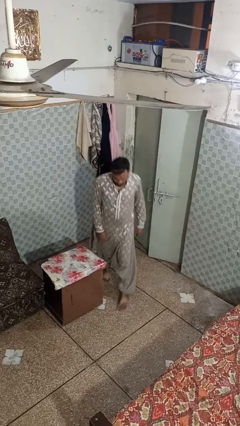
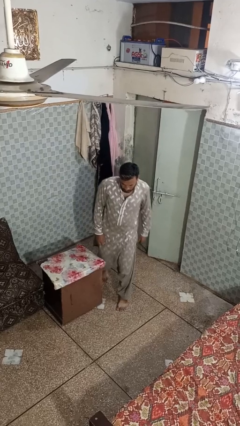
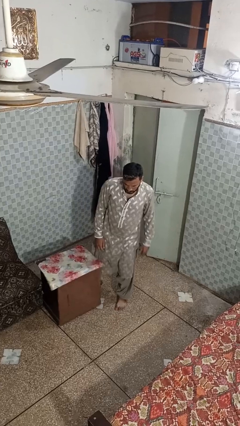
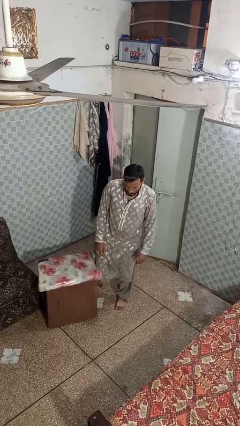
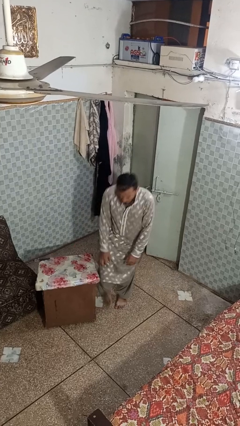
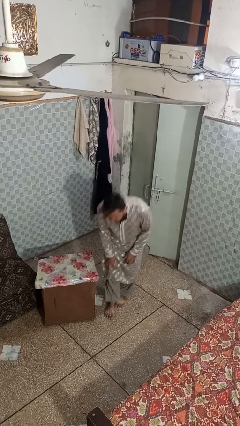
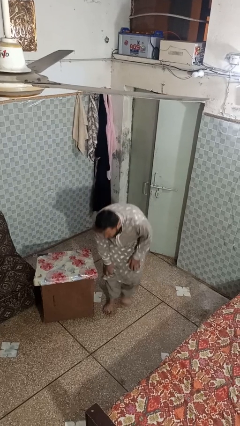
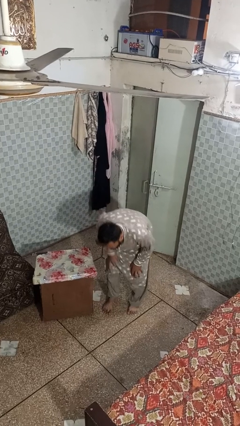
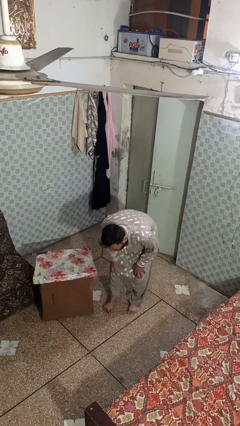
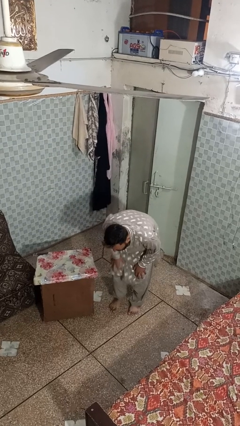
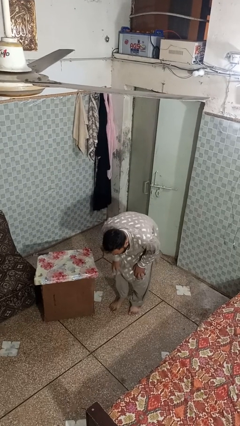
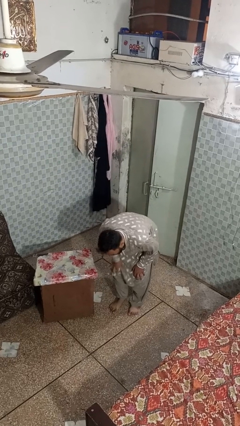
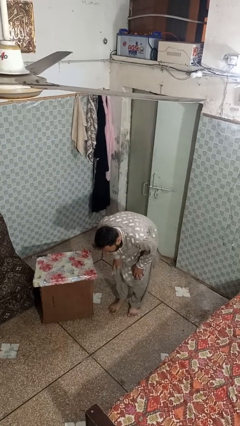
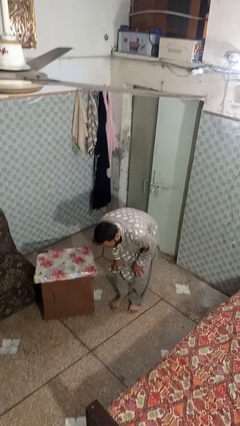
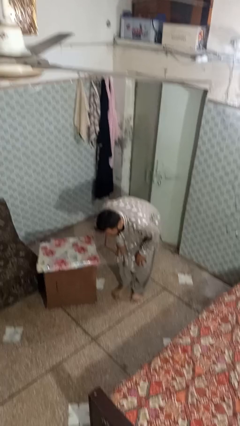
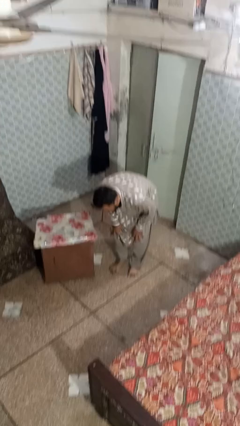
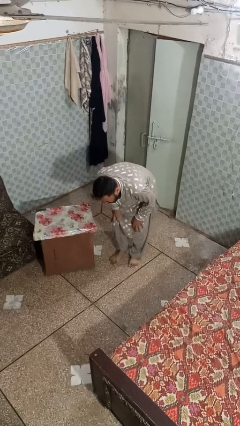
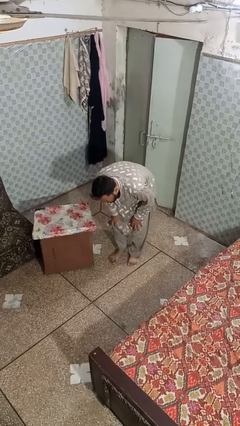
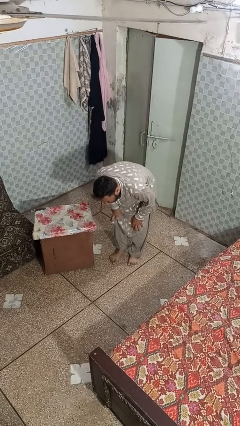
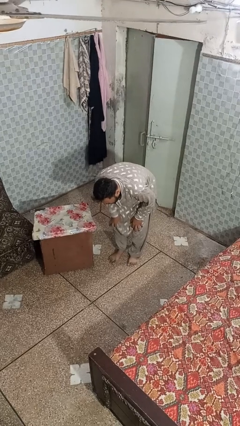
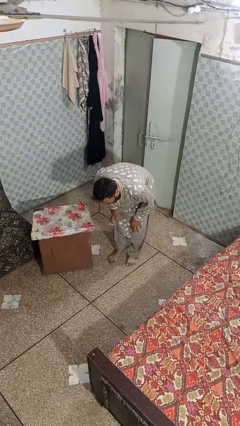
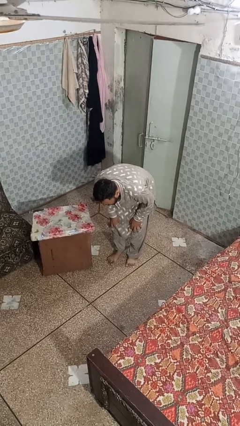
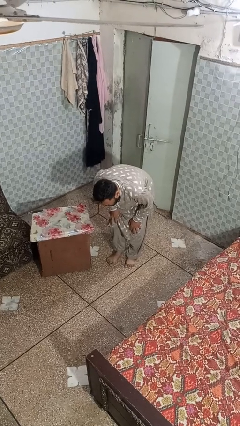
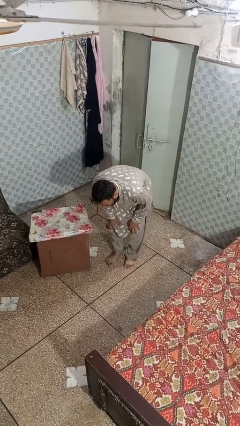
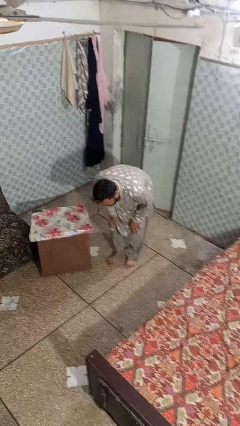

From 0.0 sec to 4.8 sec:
person trips on object on floor

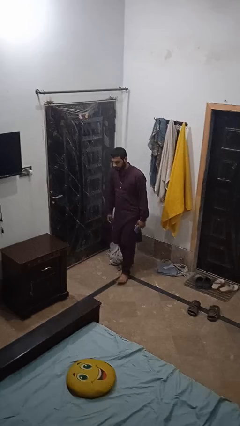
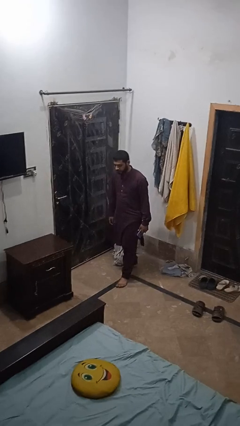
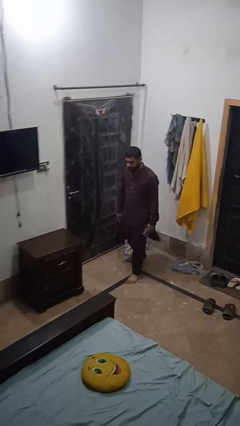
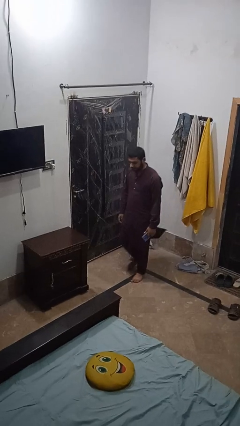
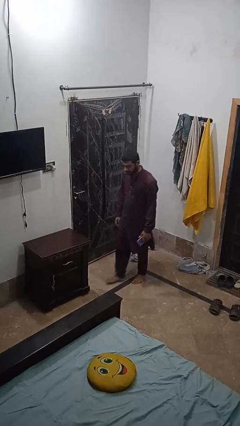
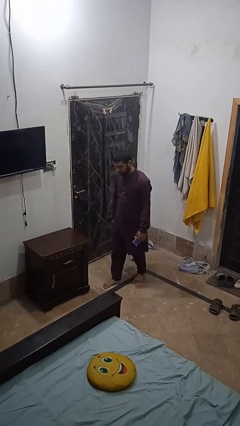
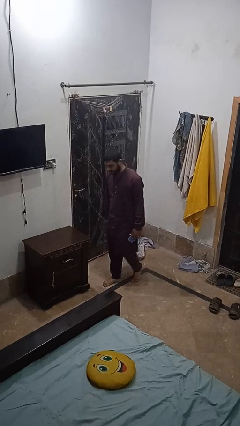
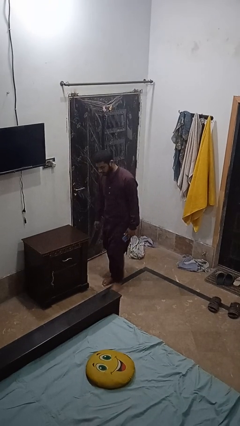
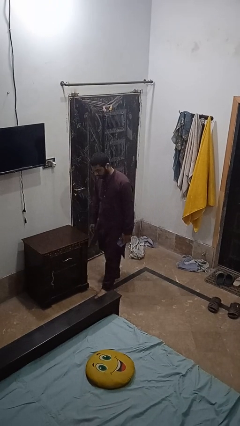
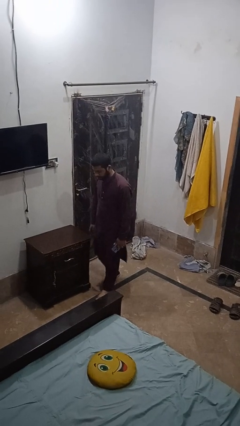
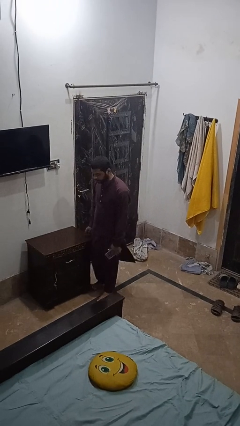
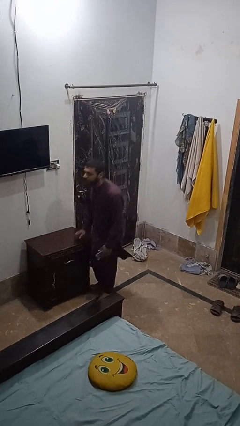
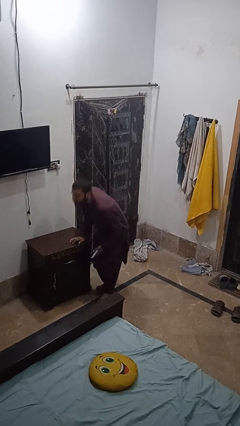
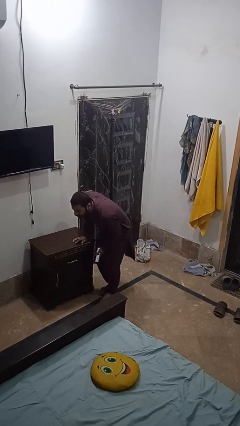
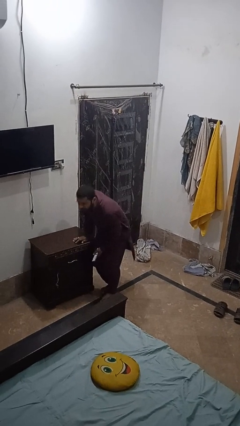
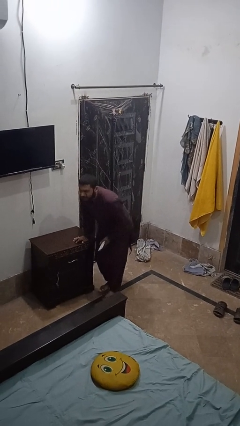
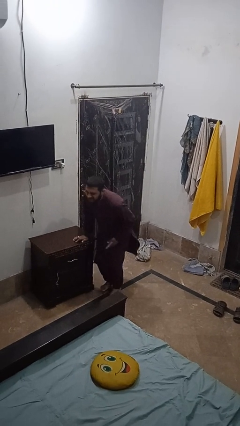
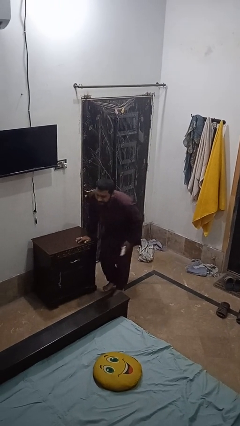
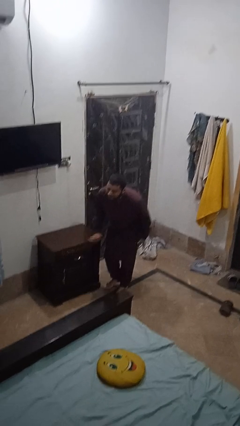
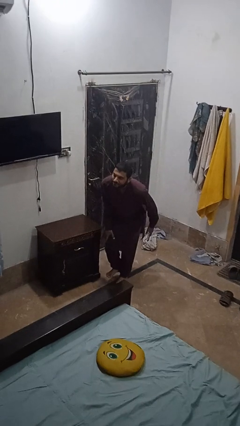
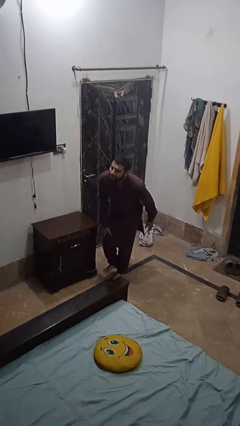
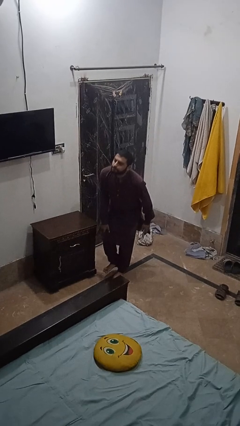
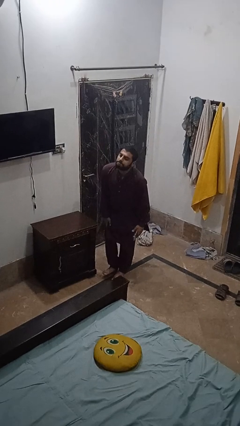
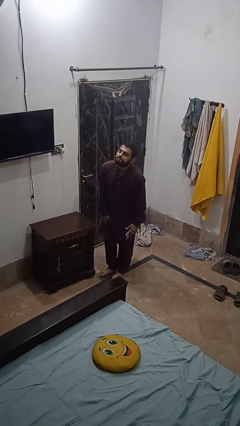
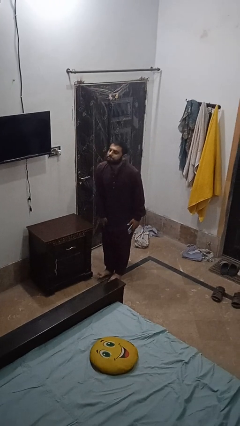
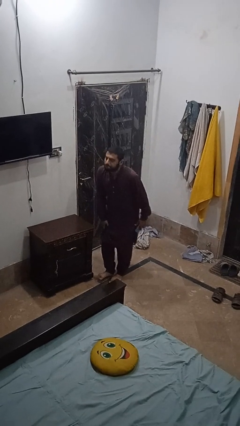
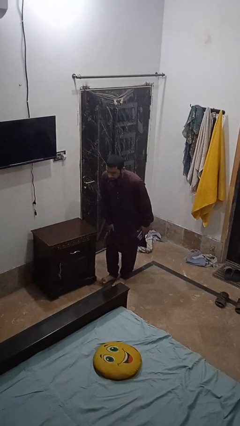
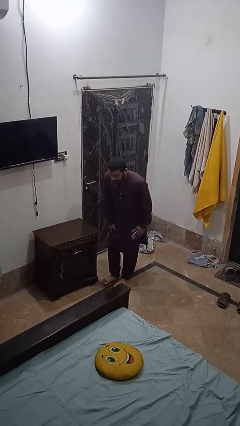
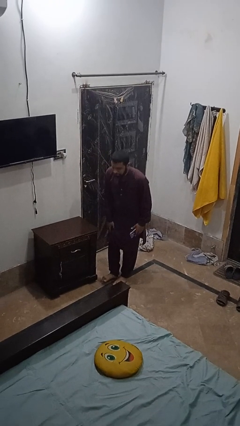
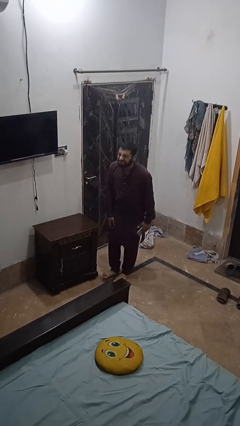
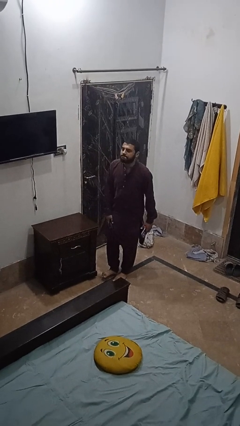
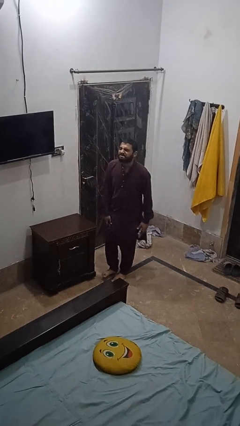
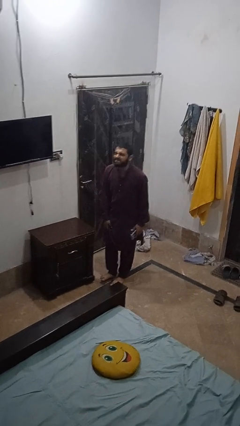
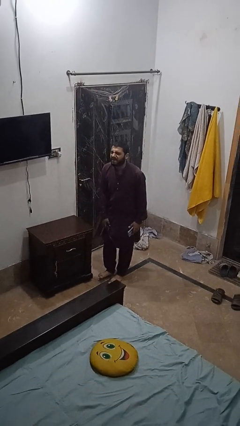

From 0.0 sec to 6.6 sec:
person stubs toe

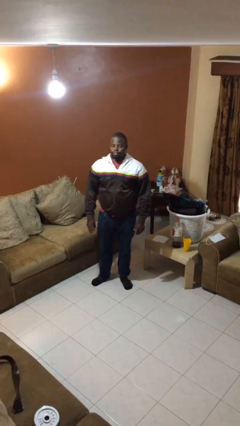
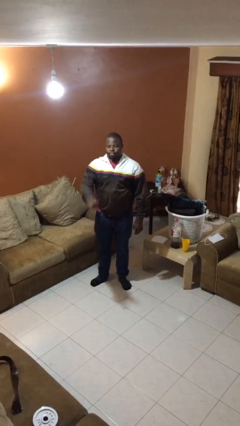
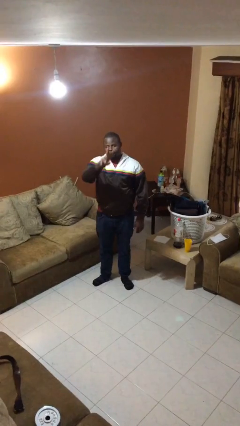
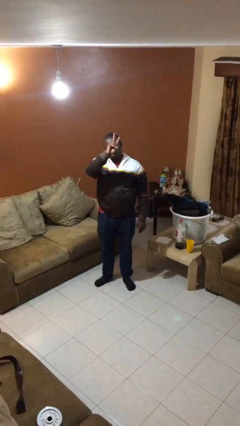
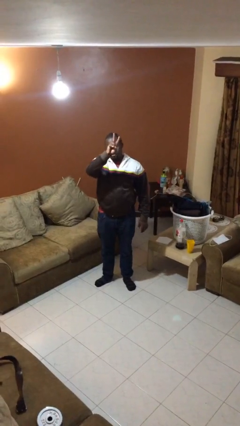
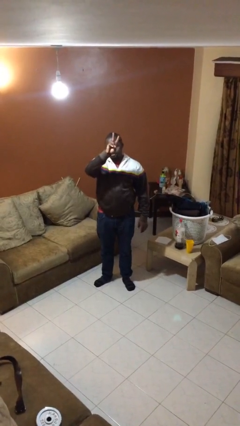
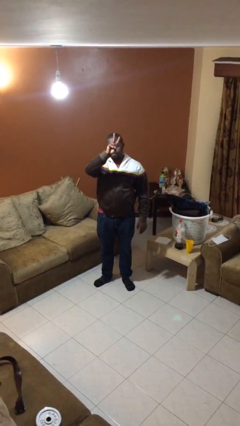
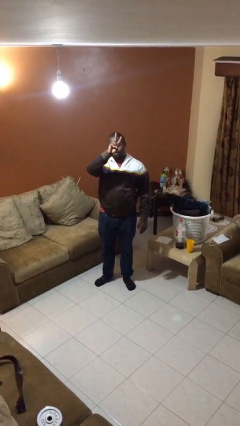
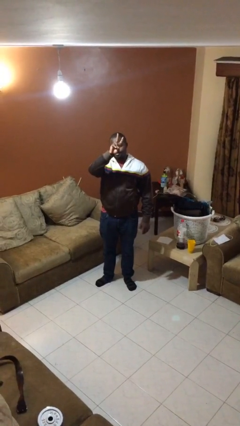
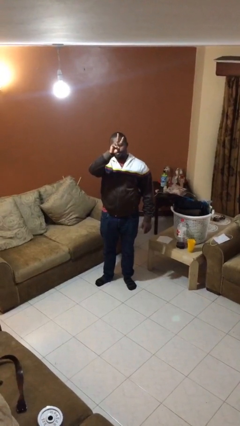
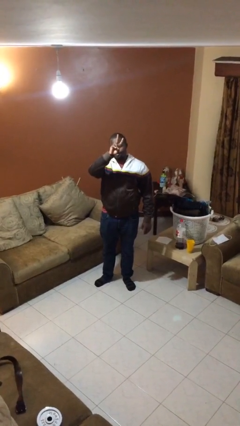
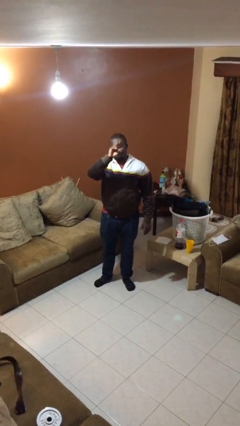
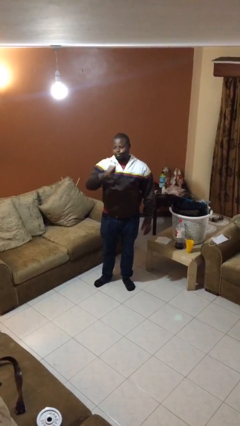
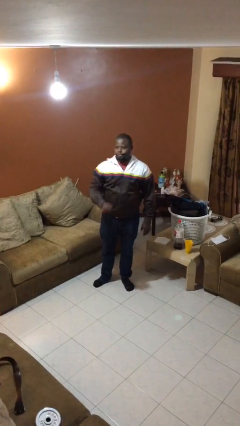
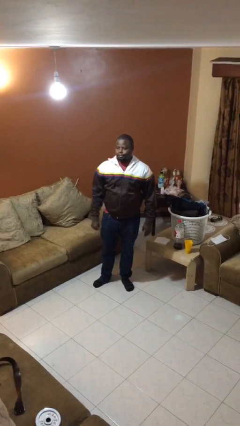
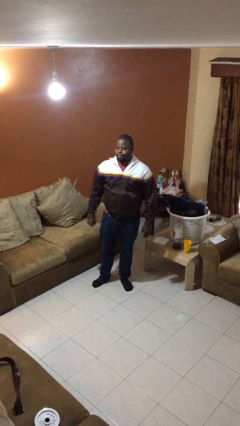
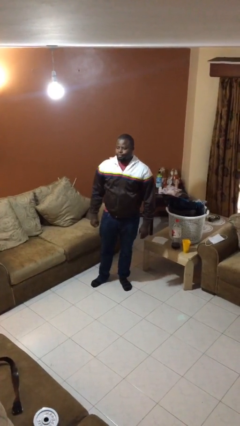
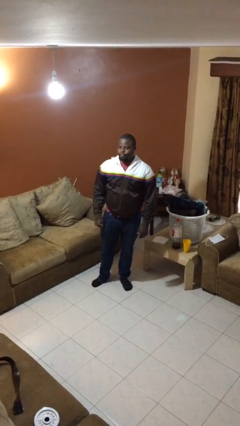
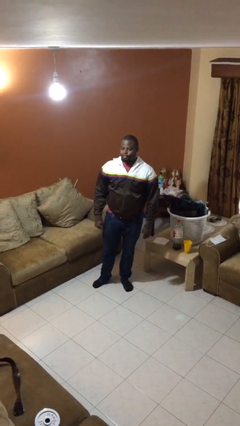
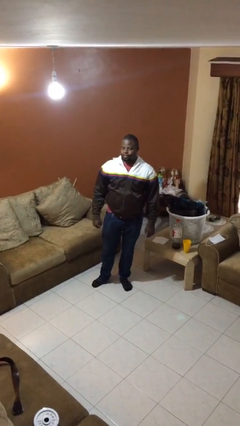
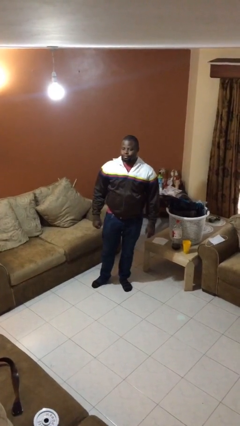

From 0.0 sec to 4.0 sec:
person gestures peace

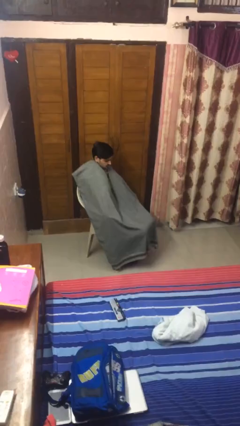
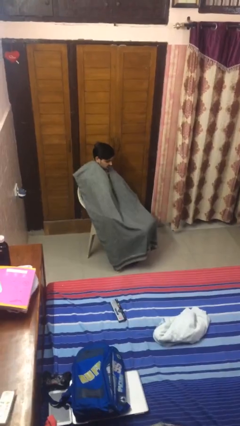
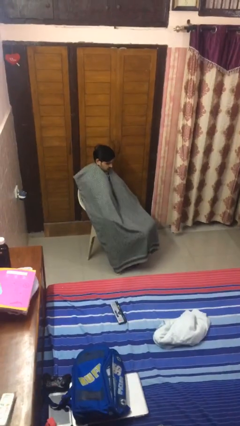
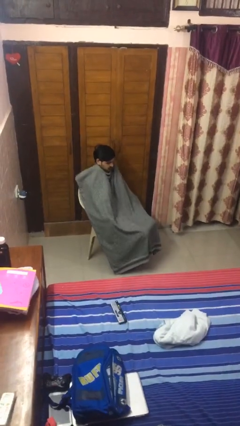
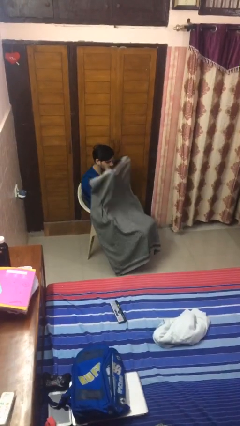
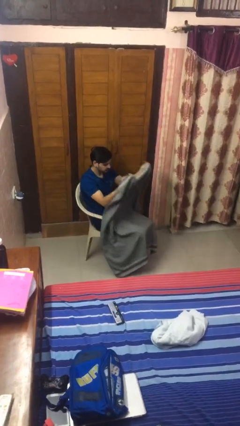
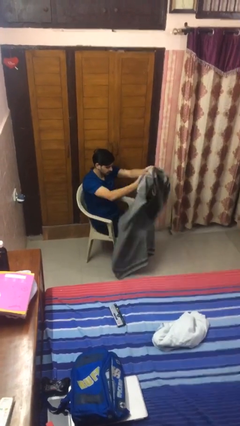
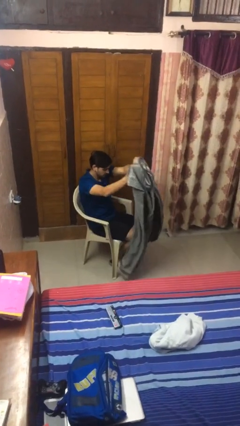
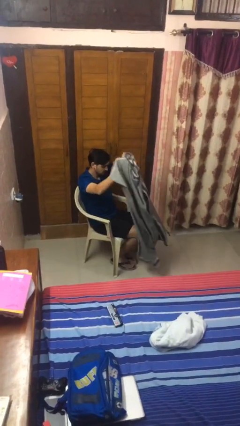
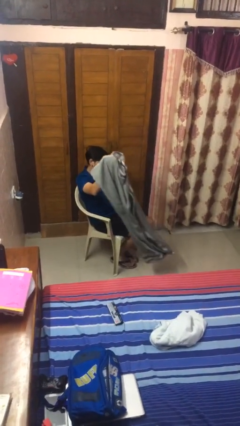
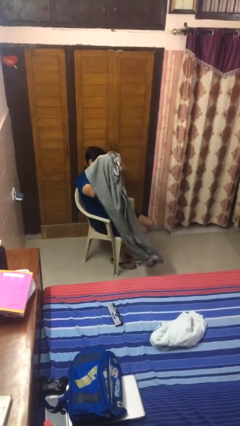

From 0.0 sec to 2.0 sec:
person uncovers with blanket

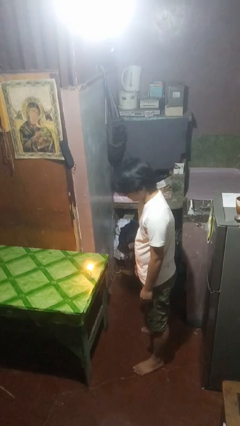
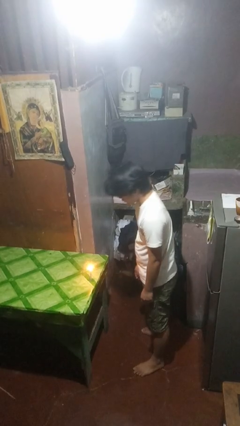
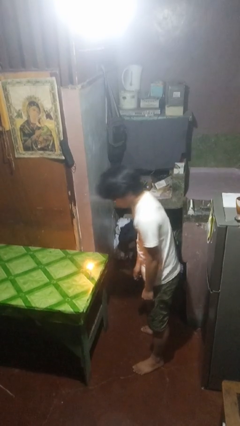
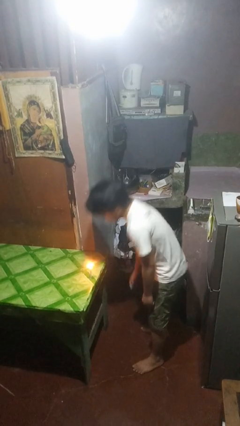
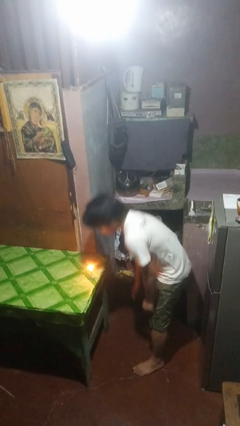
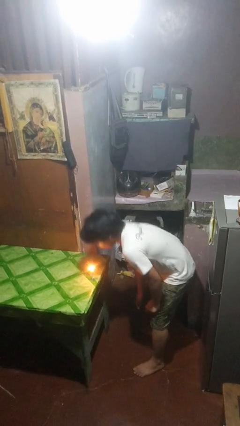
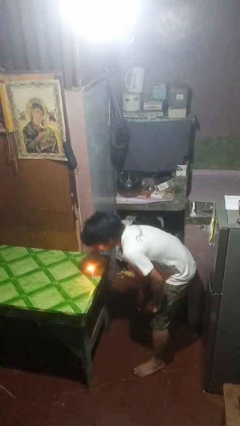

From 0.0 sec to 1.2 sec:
person extinguishes candle
